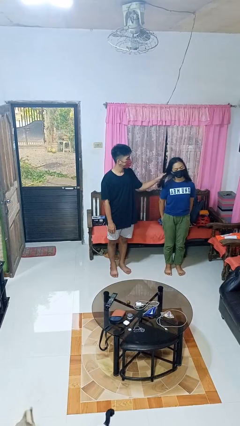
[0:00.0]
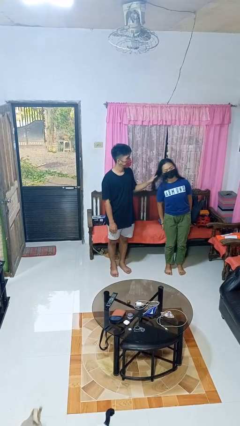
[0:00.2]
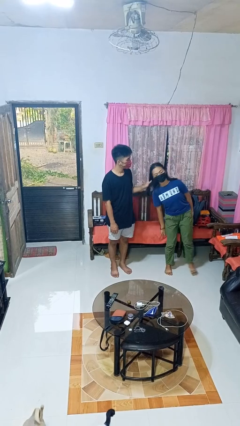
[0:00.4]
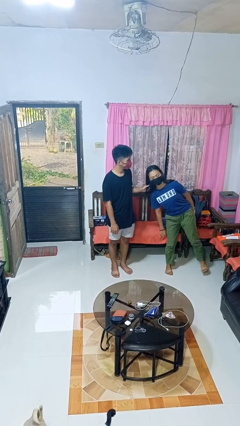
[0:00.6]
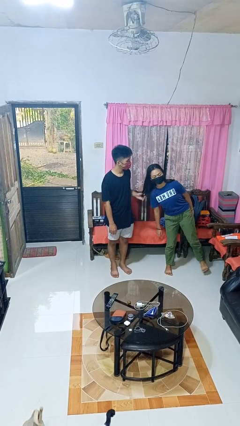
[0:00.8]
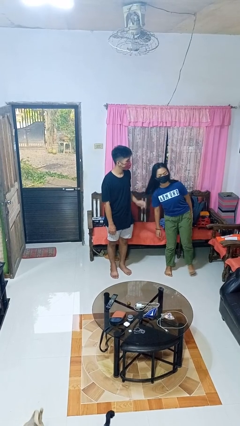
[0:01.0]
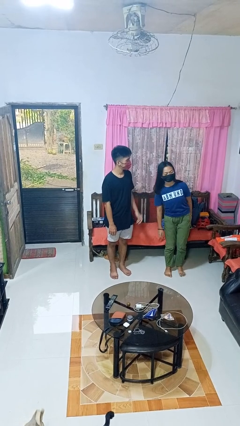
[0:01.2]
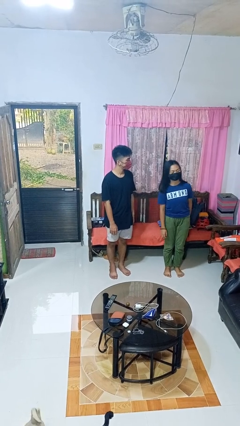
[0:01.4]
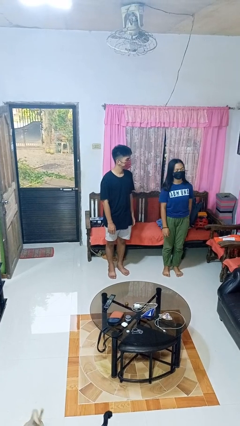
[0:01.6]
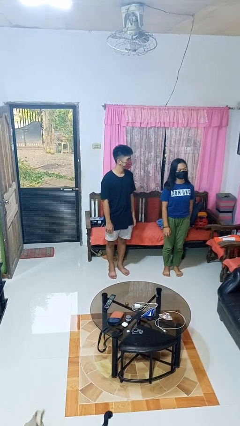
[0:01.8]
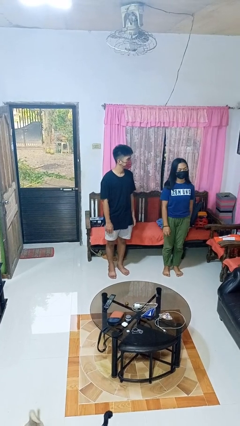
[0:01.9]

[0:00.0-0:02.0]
person grabs person by hair

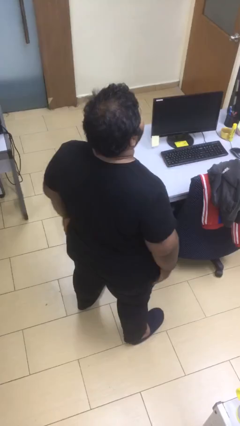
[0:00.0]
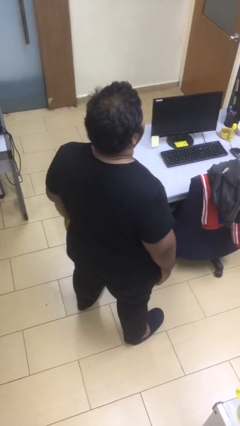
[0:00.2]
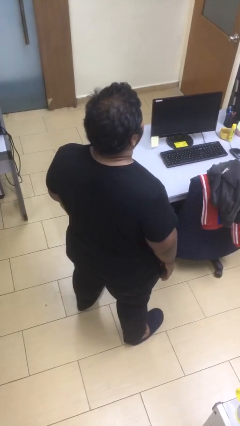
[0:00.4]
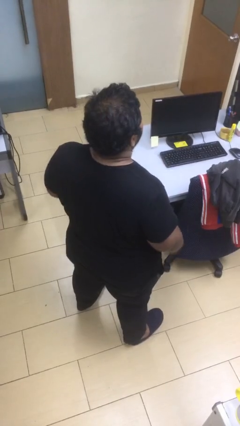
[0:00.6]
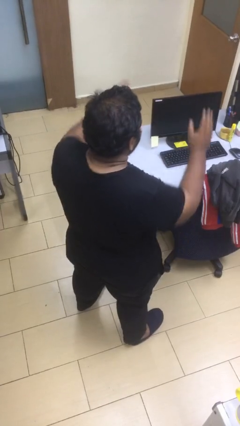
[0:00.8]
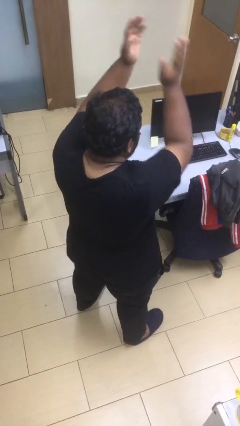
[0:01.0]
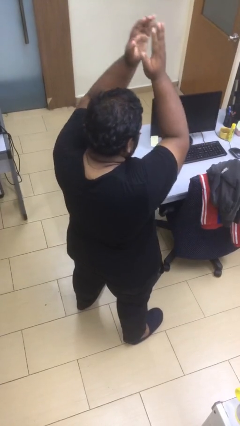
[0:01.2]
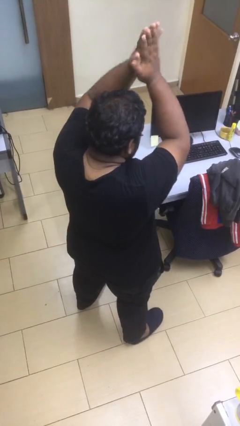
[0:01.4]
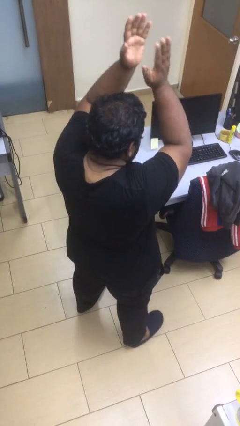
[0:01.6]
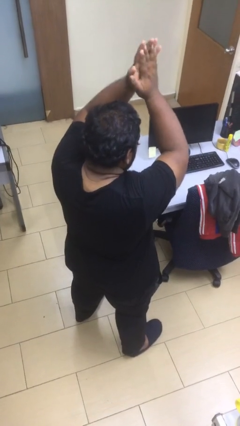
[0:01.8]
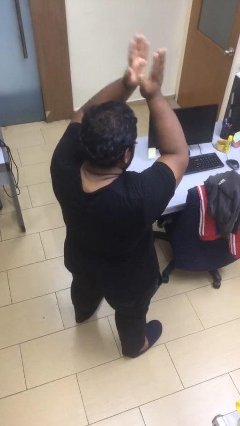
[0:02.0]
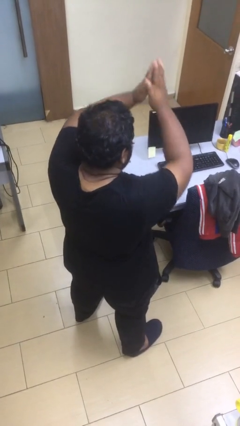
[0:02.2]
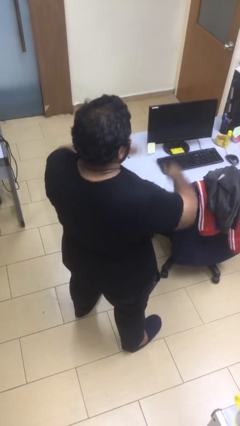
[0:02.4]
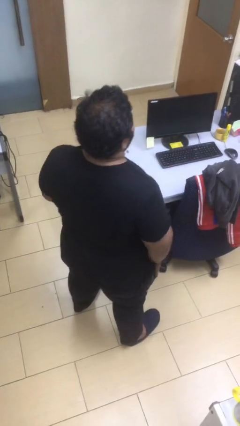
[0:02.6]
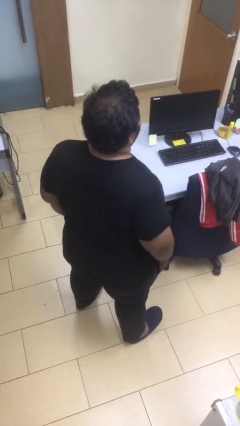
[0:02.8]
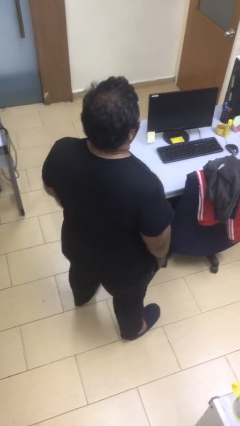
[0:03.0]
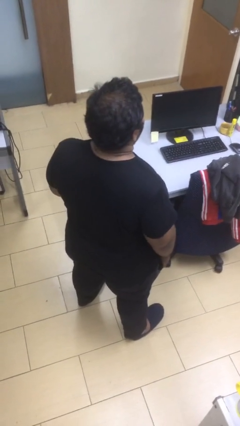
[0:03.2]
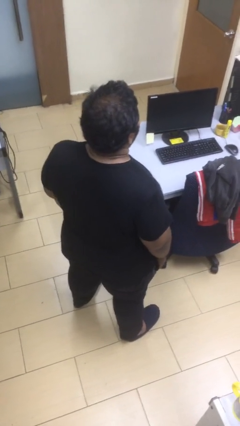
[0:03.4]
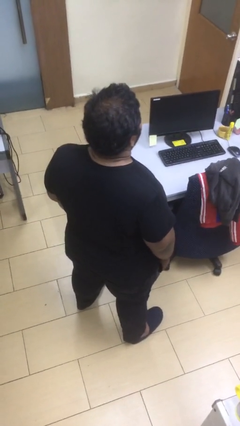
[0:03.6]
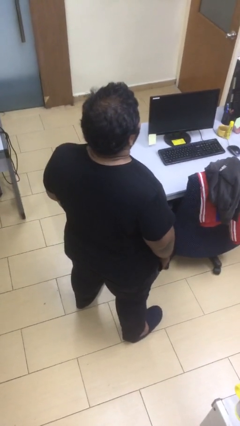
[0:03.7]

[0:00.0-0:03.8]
person claps hands

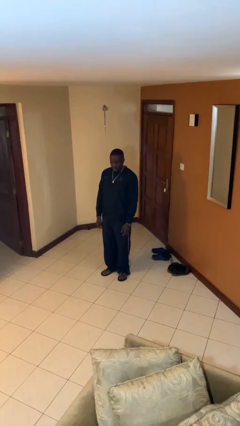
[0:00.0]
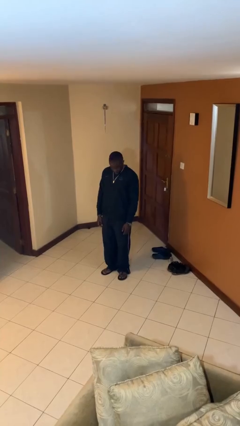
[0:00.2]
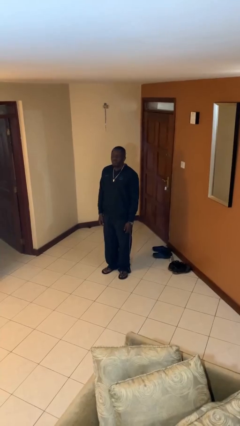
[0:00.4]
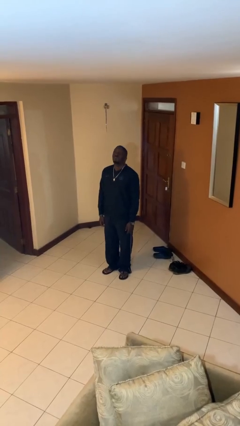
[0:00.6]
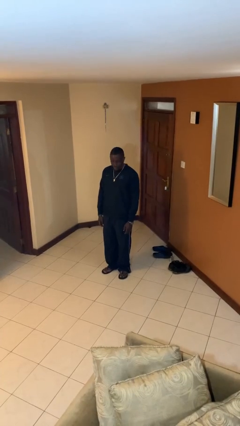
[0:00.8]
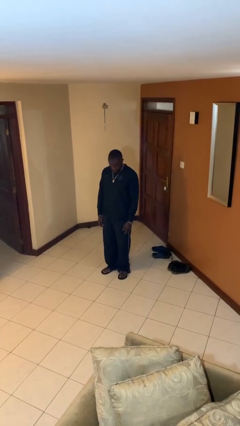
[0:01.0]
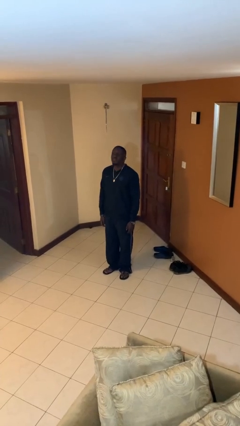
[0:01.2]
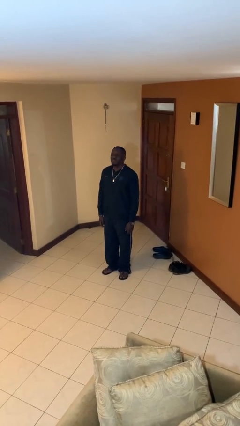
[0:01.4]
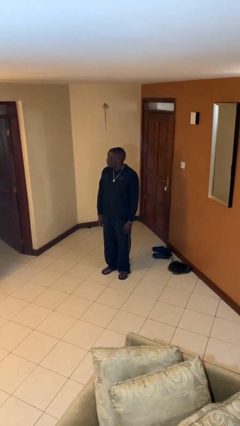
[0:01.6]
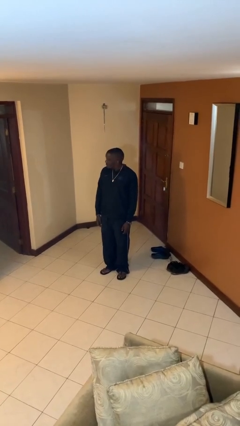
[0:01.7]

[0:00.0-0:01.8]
person nods head

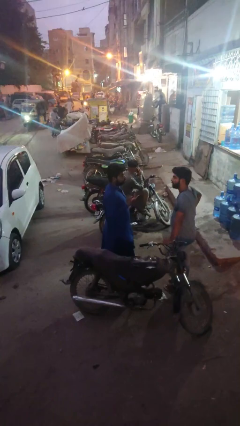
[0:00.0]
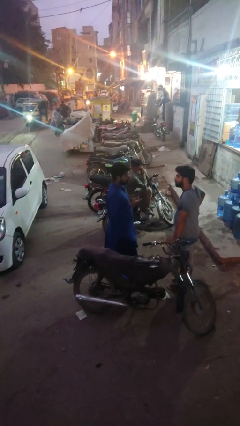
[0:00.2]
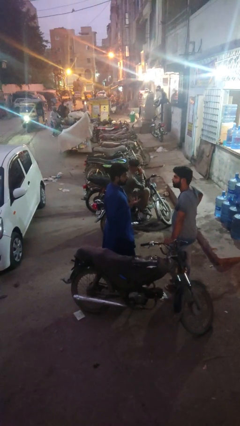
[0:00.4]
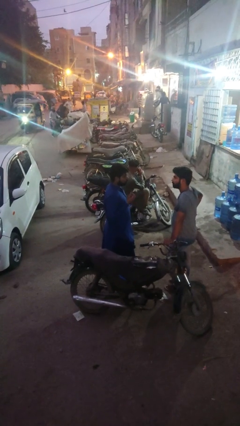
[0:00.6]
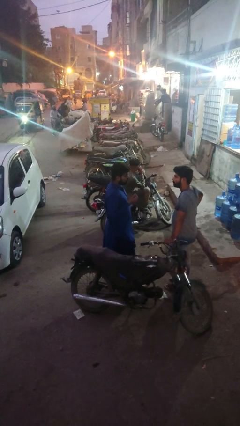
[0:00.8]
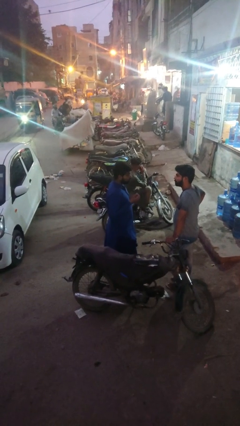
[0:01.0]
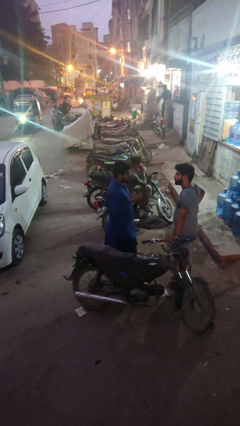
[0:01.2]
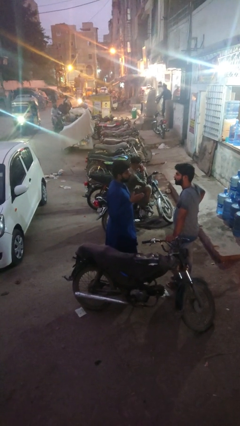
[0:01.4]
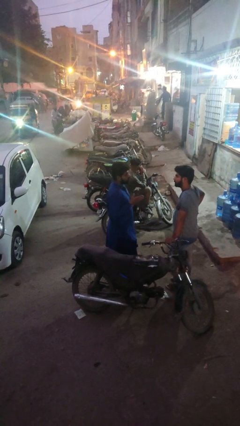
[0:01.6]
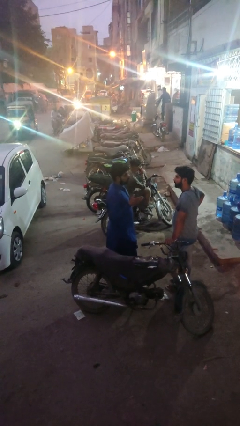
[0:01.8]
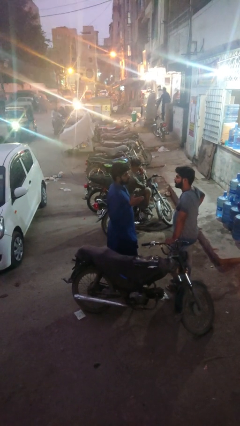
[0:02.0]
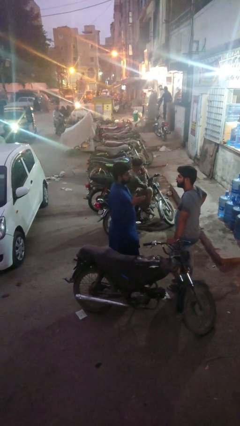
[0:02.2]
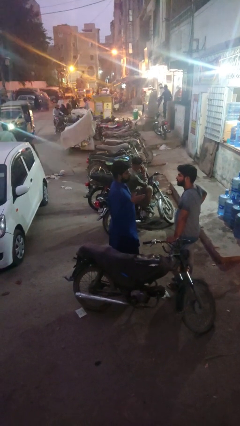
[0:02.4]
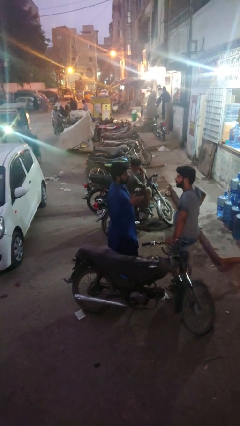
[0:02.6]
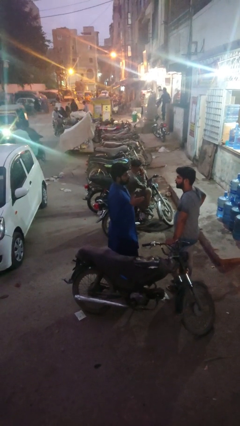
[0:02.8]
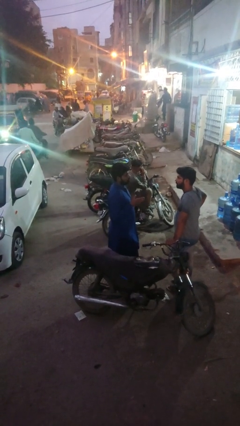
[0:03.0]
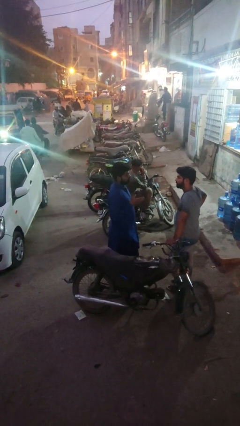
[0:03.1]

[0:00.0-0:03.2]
person talks to person

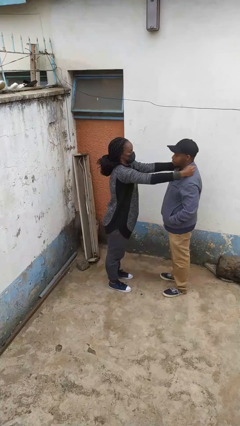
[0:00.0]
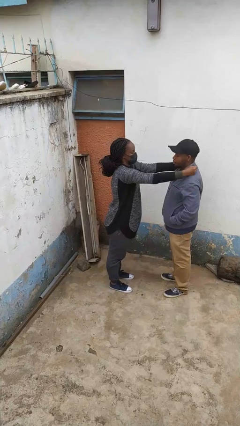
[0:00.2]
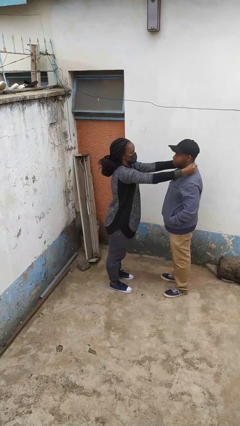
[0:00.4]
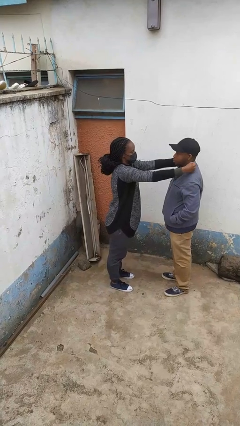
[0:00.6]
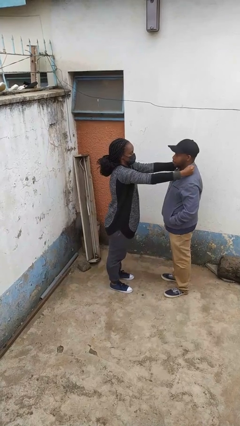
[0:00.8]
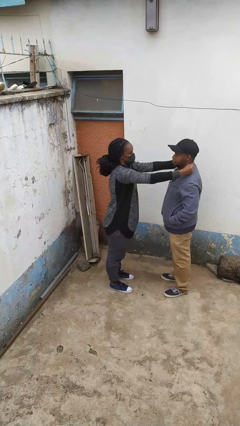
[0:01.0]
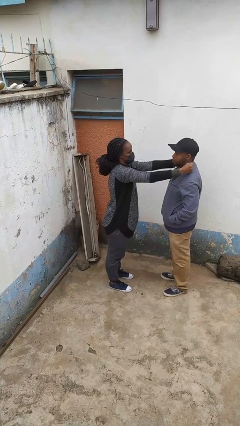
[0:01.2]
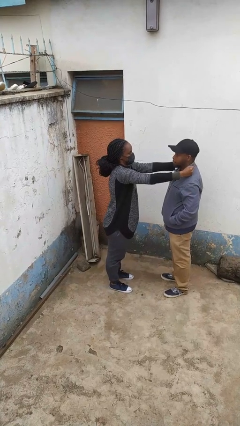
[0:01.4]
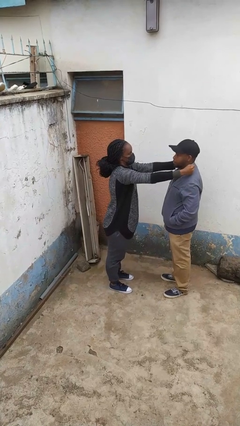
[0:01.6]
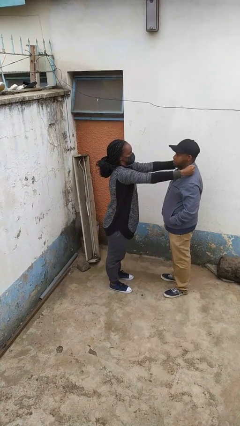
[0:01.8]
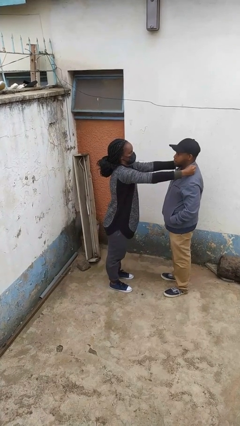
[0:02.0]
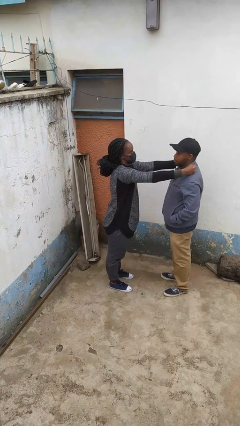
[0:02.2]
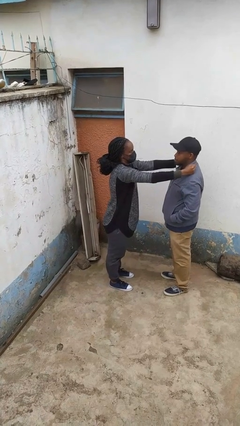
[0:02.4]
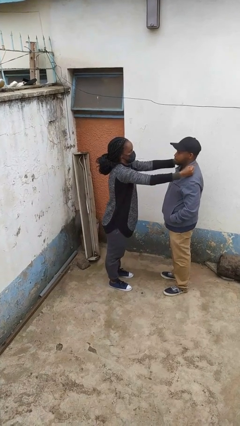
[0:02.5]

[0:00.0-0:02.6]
person pounds shoulders of person

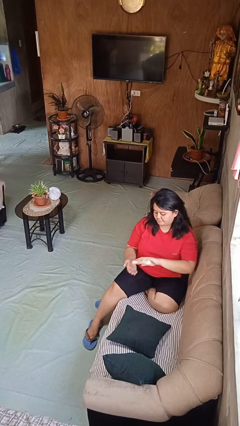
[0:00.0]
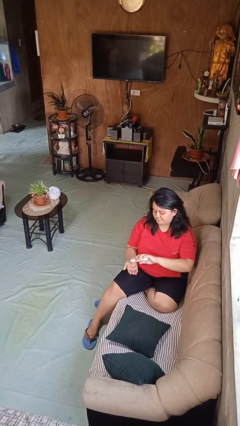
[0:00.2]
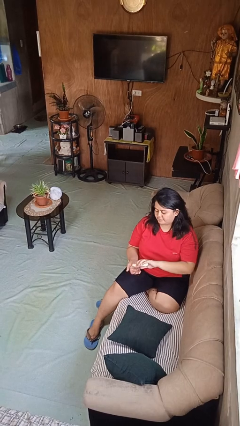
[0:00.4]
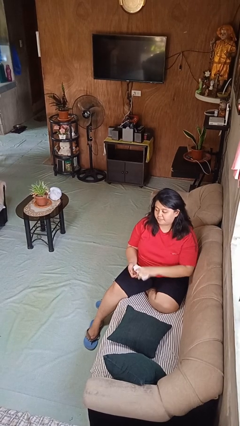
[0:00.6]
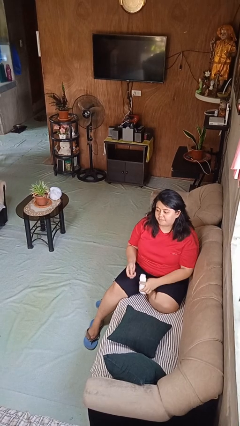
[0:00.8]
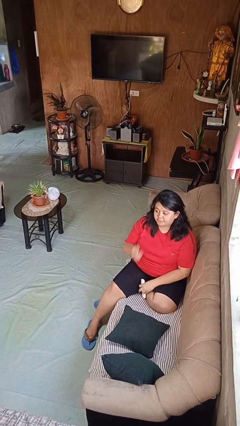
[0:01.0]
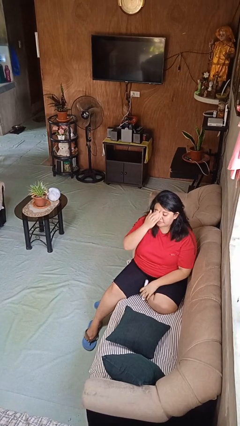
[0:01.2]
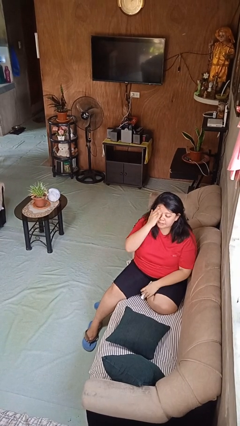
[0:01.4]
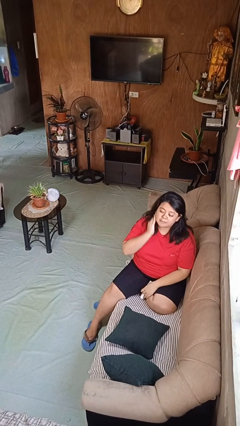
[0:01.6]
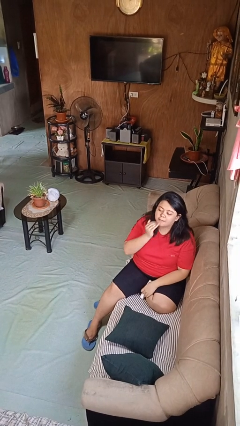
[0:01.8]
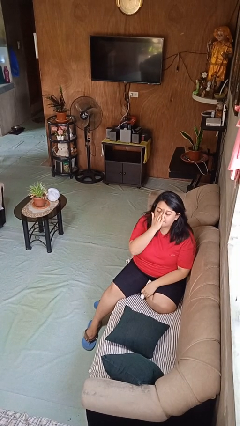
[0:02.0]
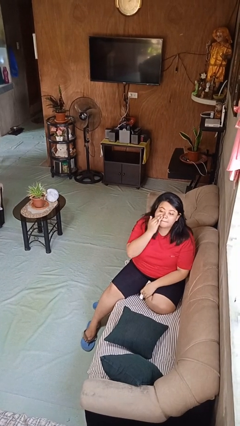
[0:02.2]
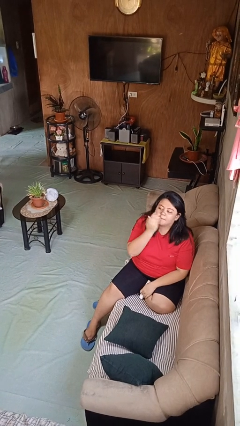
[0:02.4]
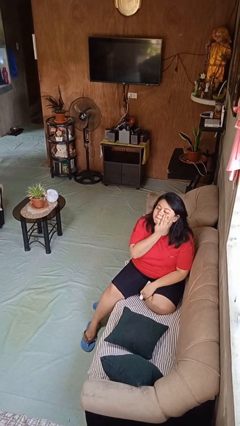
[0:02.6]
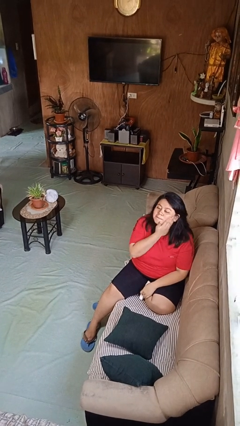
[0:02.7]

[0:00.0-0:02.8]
person applies facial moisturizer

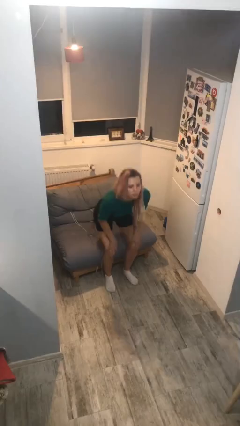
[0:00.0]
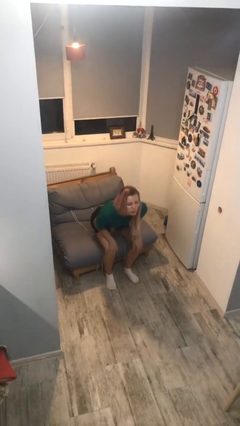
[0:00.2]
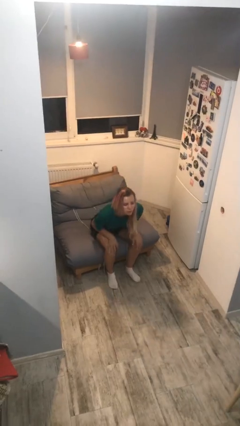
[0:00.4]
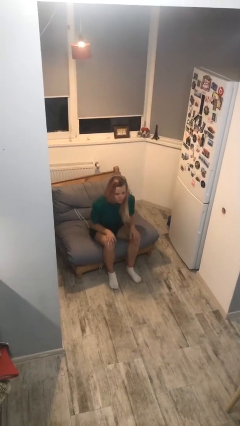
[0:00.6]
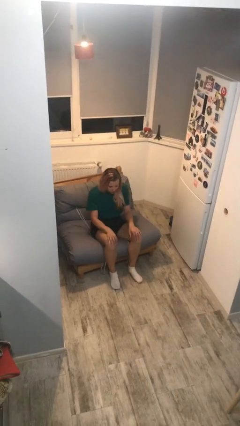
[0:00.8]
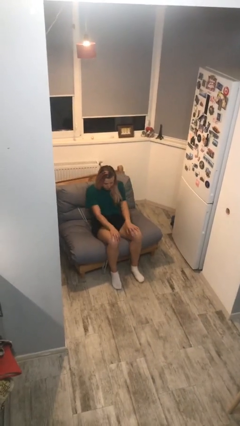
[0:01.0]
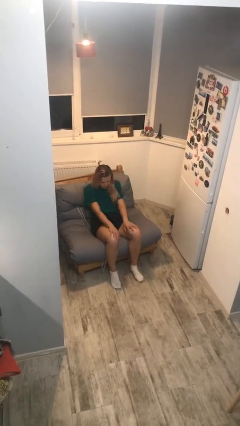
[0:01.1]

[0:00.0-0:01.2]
person lies down on couch
